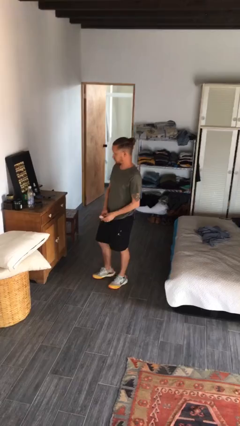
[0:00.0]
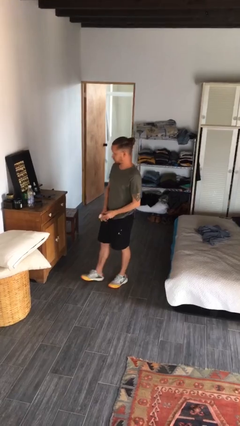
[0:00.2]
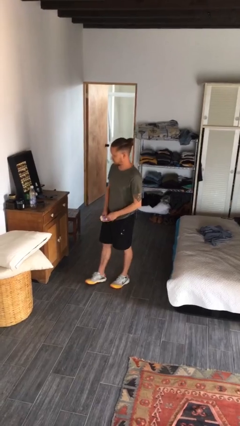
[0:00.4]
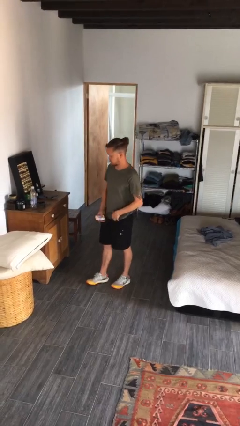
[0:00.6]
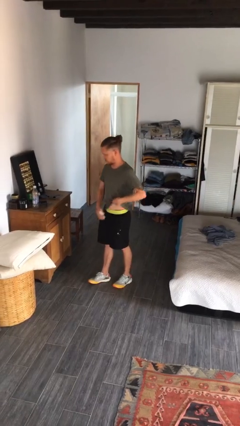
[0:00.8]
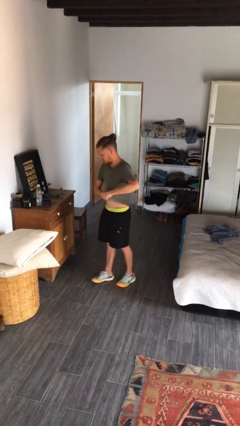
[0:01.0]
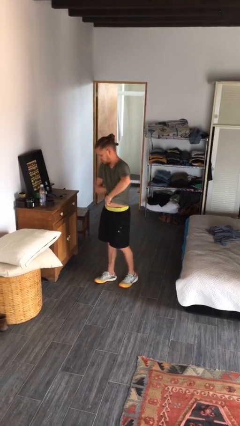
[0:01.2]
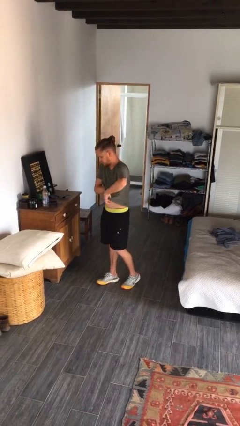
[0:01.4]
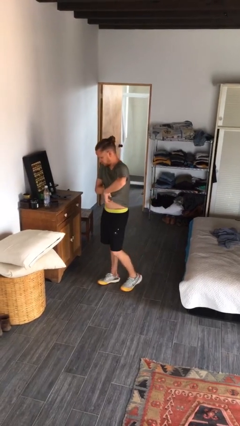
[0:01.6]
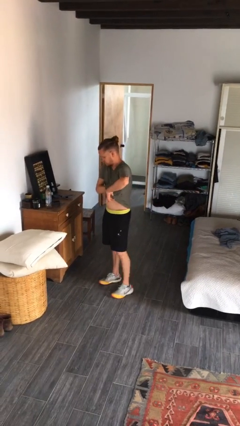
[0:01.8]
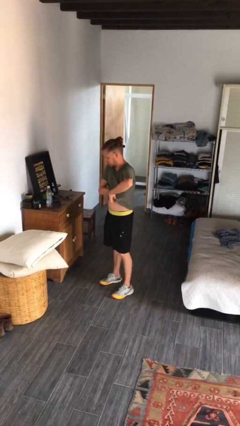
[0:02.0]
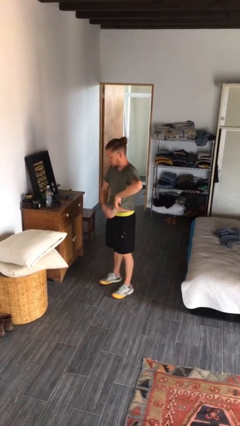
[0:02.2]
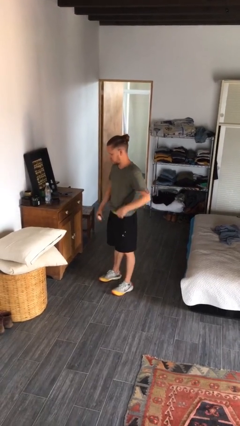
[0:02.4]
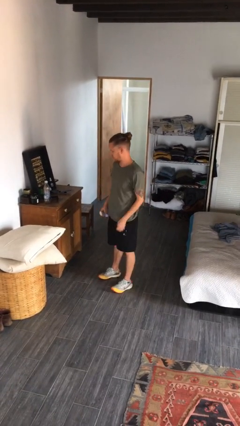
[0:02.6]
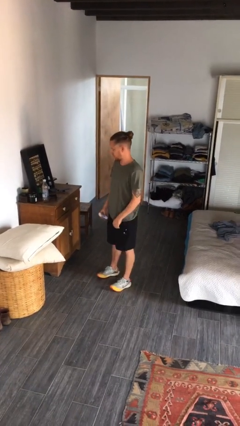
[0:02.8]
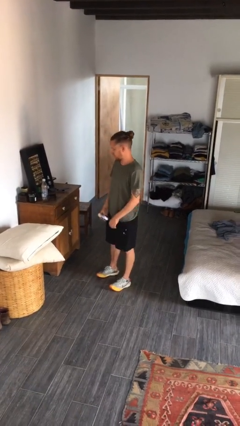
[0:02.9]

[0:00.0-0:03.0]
person applies deodorant

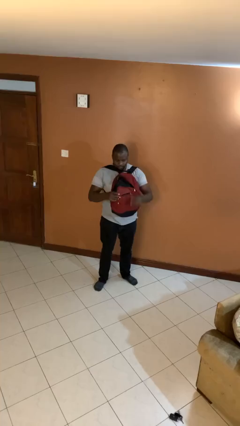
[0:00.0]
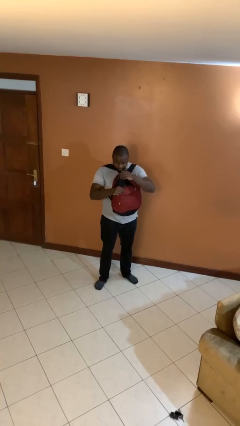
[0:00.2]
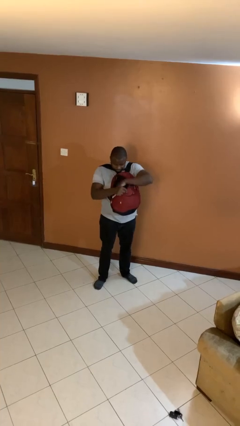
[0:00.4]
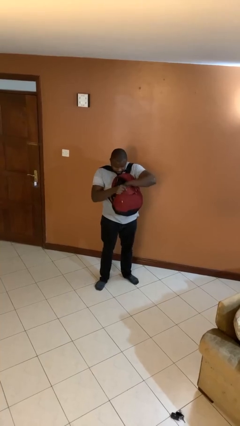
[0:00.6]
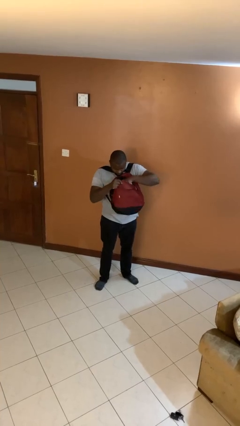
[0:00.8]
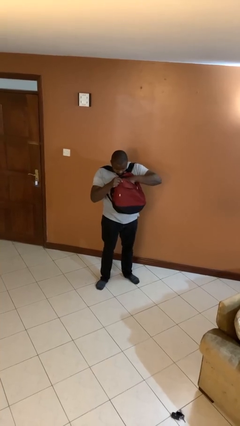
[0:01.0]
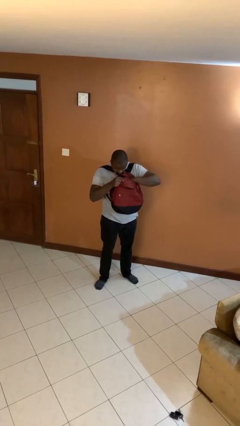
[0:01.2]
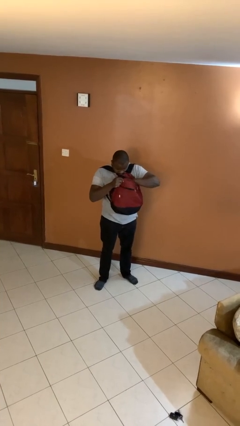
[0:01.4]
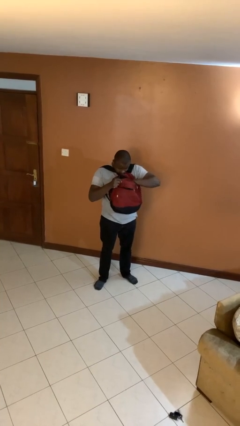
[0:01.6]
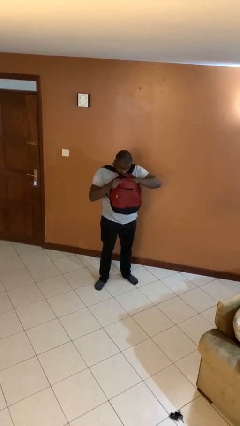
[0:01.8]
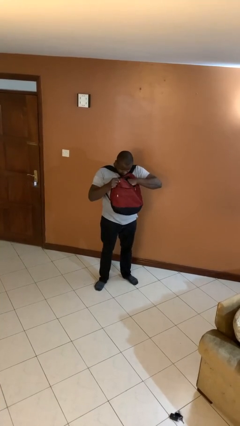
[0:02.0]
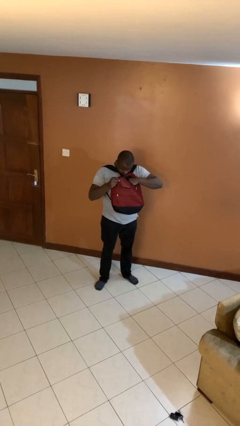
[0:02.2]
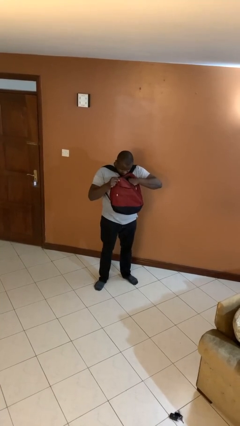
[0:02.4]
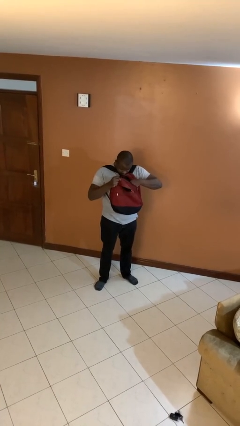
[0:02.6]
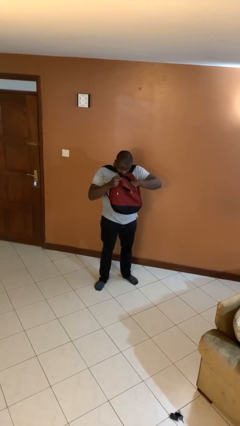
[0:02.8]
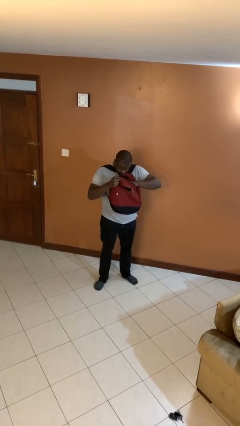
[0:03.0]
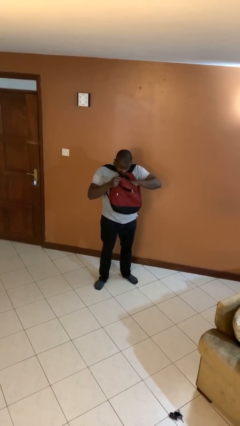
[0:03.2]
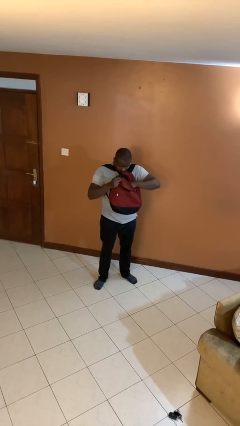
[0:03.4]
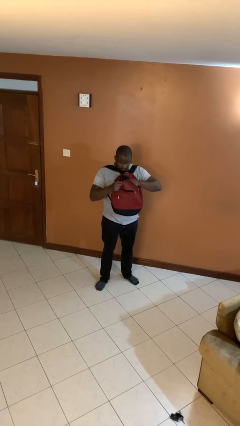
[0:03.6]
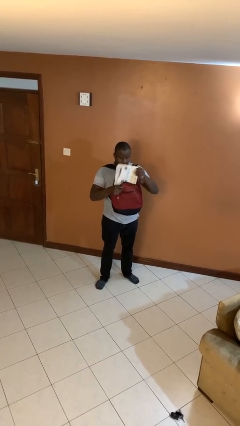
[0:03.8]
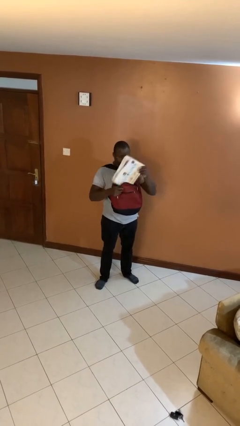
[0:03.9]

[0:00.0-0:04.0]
person searches in backpack

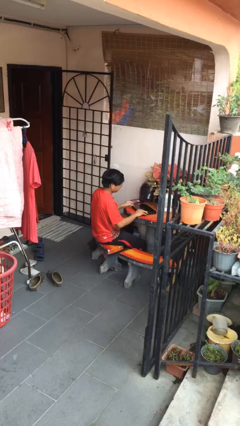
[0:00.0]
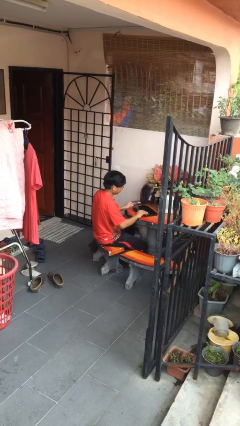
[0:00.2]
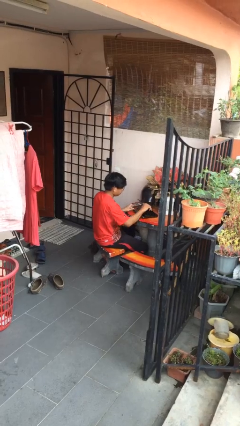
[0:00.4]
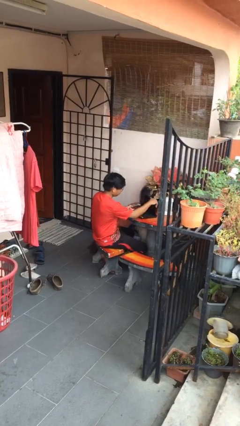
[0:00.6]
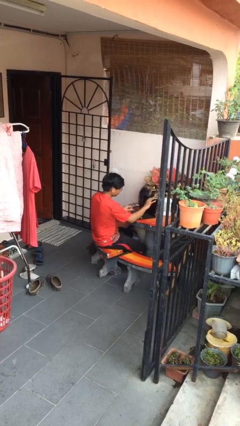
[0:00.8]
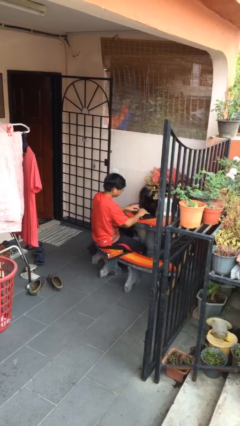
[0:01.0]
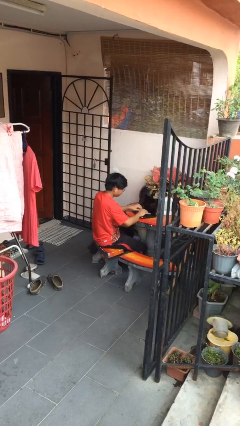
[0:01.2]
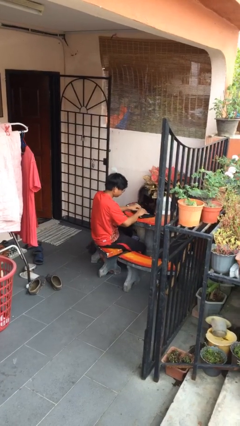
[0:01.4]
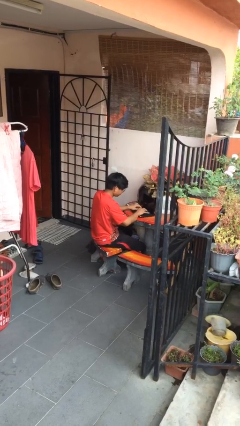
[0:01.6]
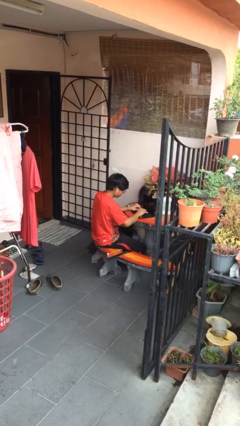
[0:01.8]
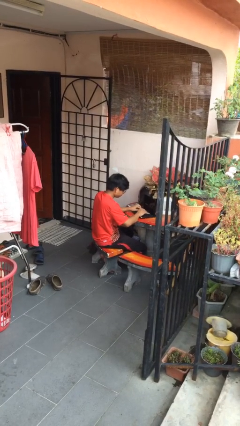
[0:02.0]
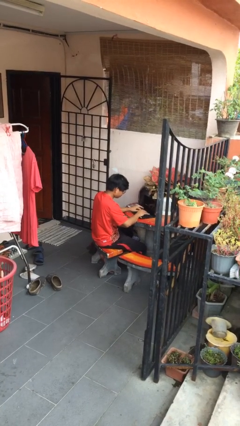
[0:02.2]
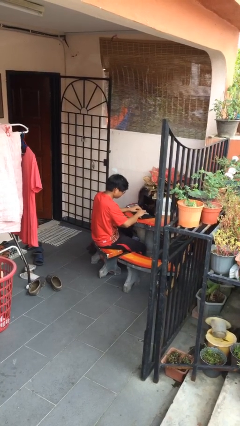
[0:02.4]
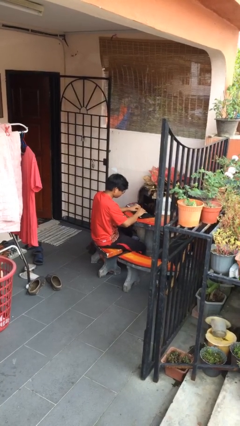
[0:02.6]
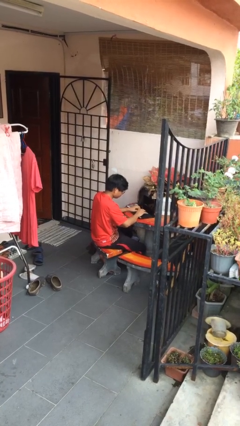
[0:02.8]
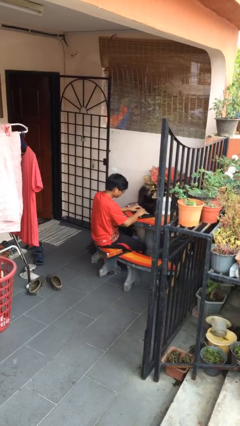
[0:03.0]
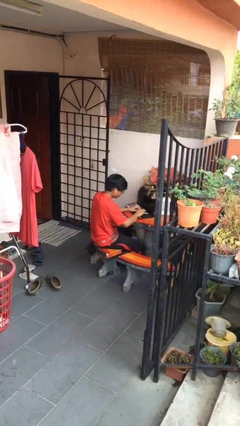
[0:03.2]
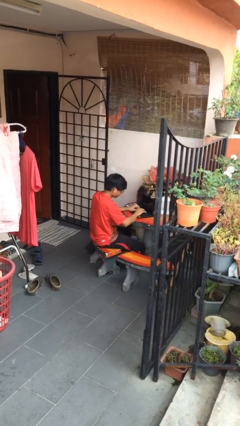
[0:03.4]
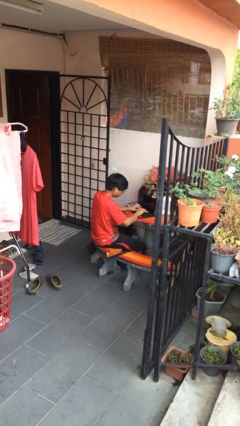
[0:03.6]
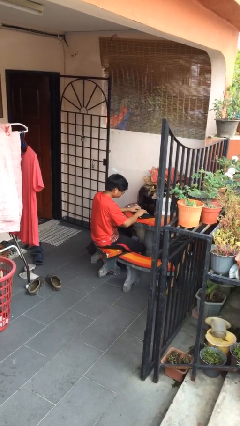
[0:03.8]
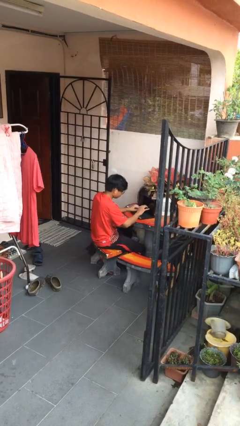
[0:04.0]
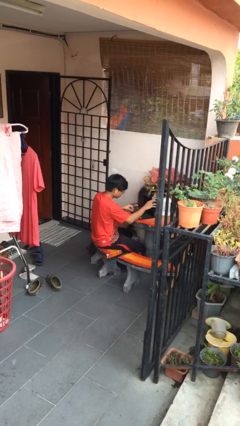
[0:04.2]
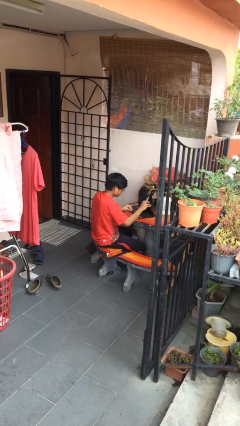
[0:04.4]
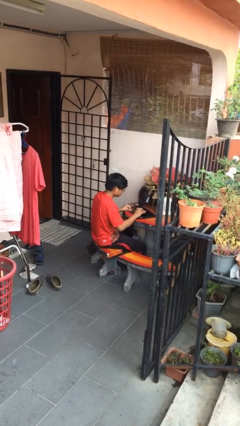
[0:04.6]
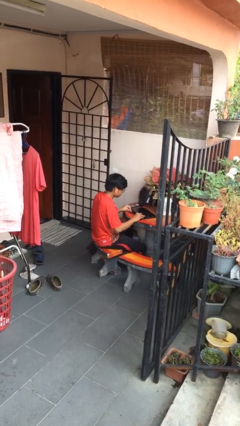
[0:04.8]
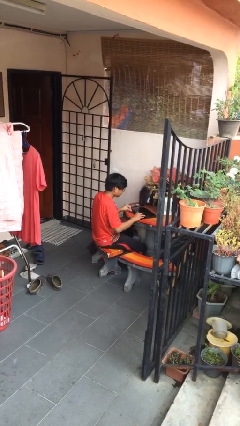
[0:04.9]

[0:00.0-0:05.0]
person interacts with laptop

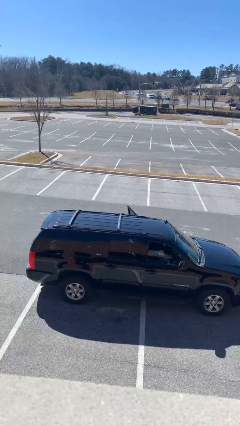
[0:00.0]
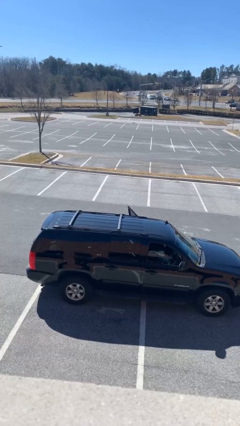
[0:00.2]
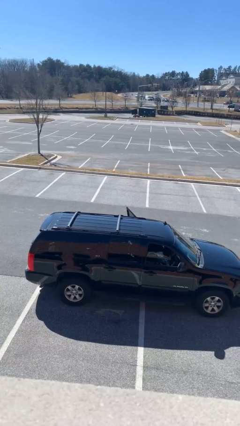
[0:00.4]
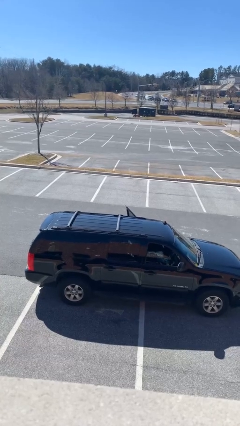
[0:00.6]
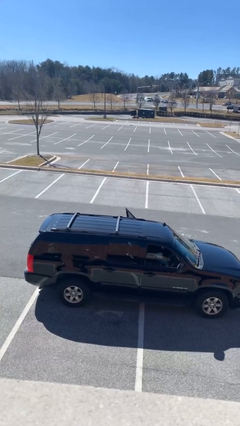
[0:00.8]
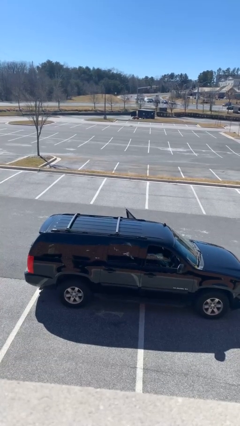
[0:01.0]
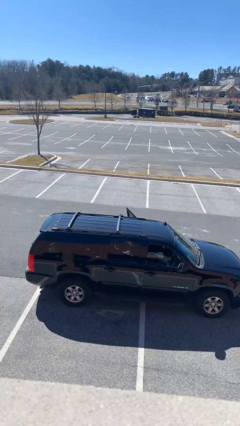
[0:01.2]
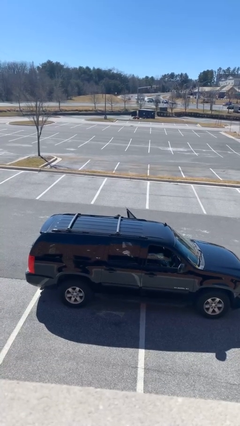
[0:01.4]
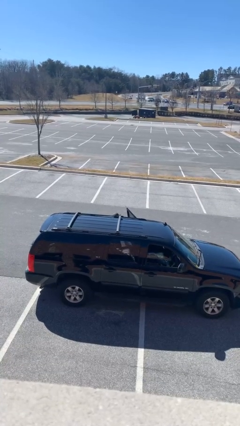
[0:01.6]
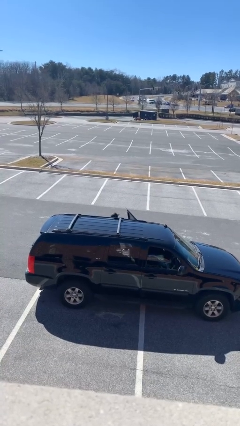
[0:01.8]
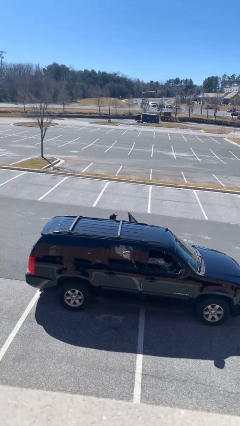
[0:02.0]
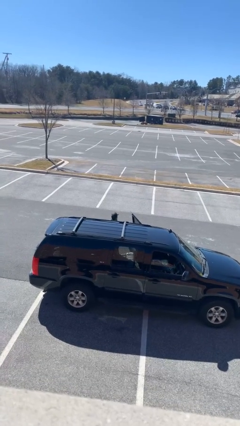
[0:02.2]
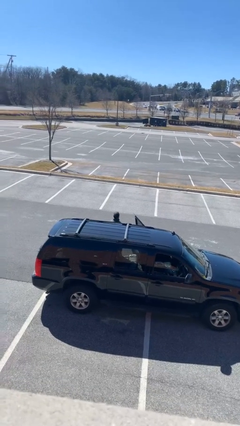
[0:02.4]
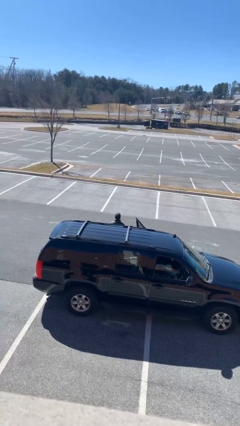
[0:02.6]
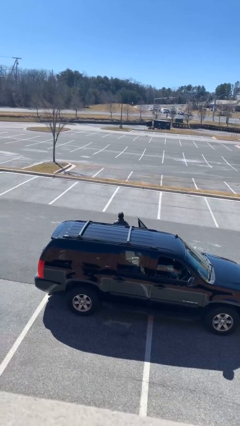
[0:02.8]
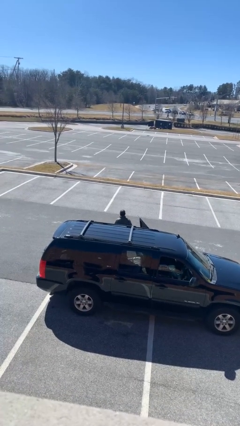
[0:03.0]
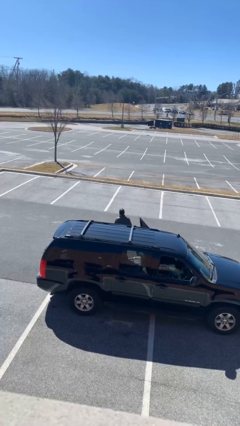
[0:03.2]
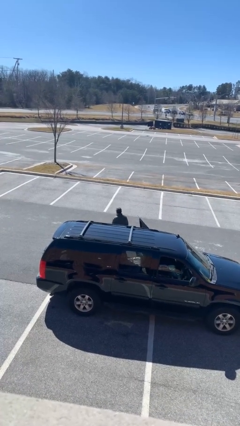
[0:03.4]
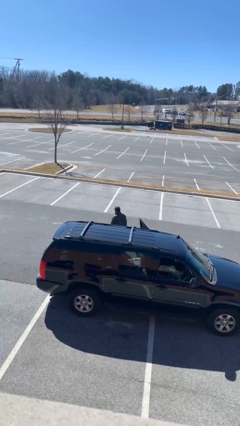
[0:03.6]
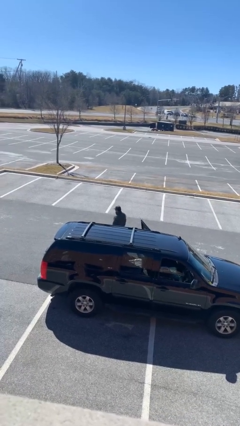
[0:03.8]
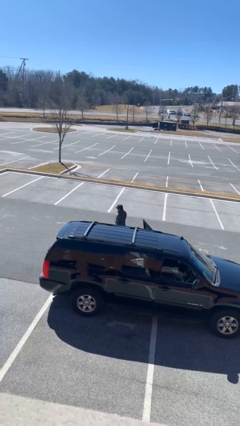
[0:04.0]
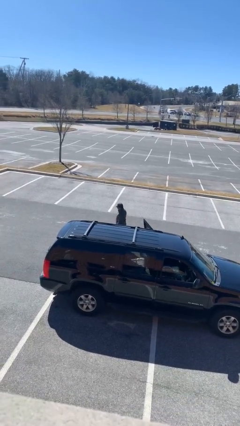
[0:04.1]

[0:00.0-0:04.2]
person exits car

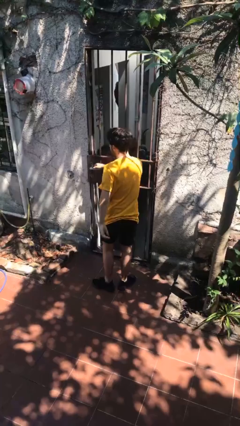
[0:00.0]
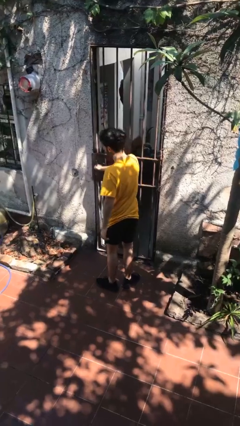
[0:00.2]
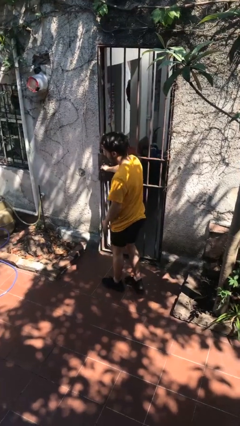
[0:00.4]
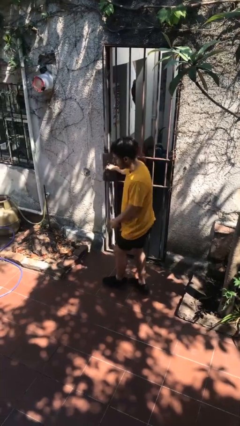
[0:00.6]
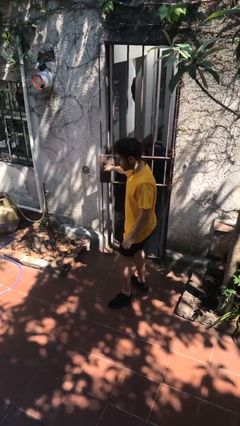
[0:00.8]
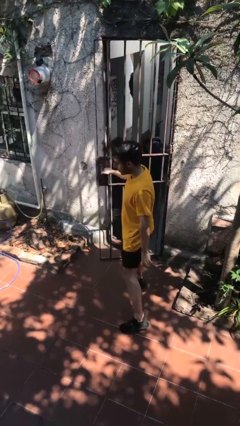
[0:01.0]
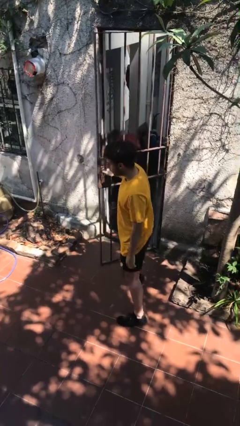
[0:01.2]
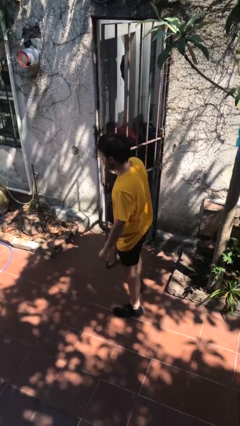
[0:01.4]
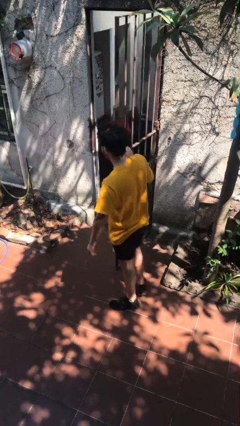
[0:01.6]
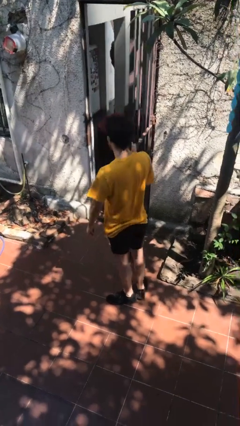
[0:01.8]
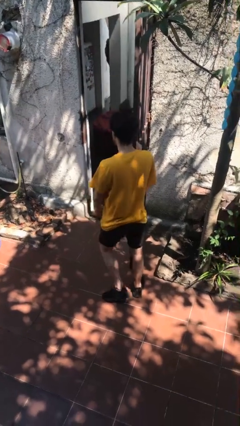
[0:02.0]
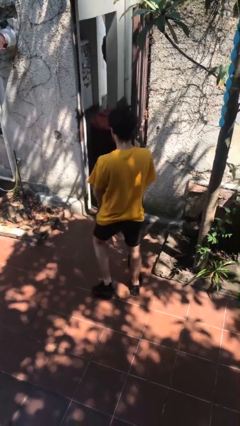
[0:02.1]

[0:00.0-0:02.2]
person opens facility door
